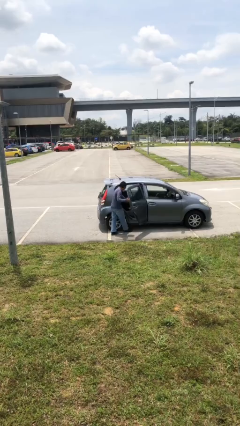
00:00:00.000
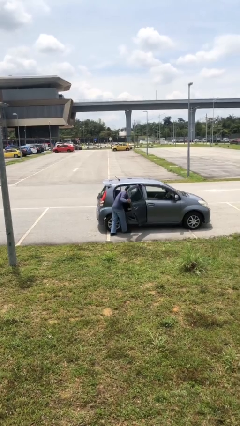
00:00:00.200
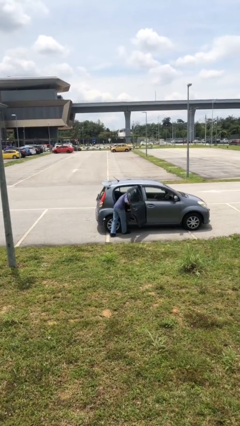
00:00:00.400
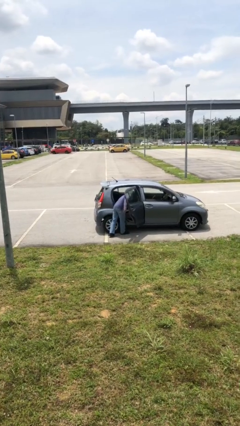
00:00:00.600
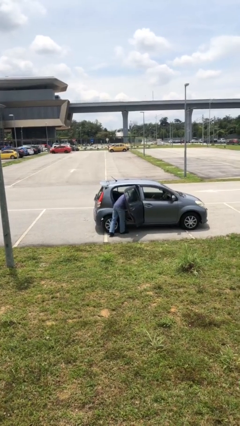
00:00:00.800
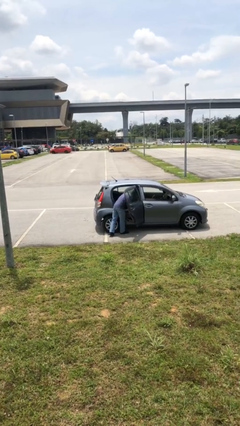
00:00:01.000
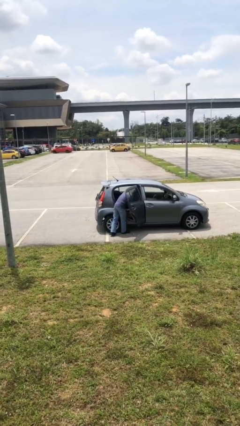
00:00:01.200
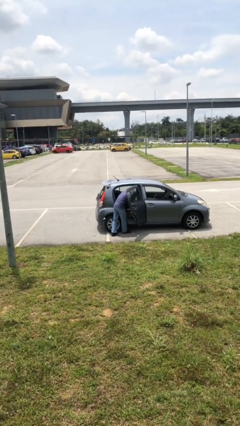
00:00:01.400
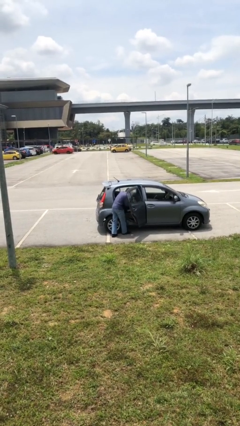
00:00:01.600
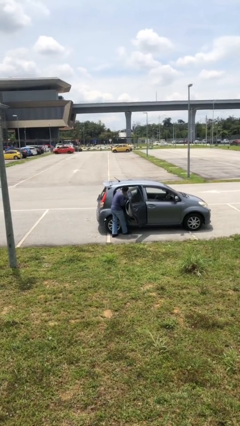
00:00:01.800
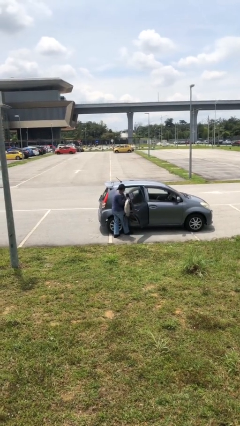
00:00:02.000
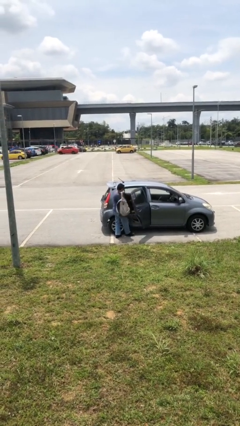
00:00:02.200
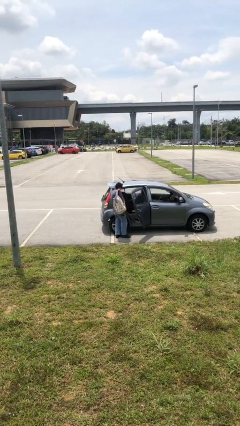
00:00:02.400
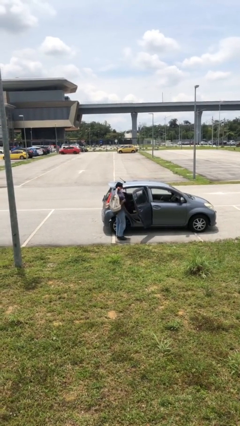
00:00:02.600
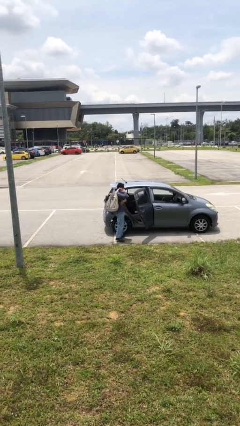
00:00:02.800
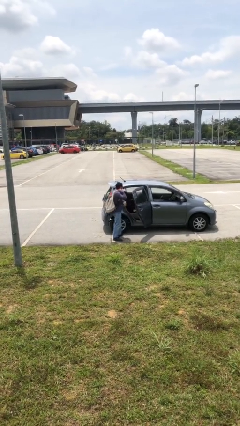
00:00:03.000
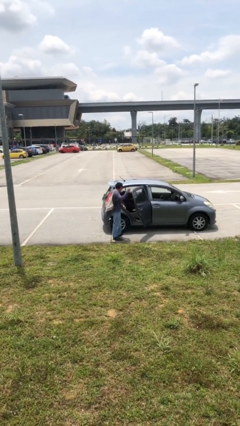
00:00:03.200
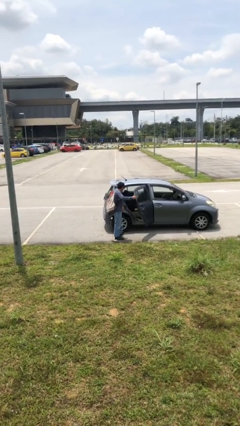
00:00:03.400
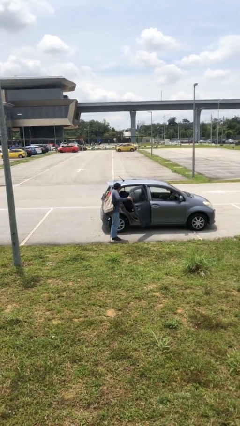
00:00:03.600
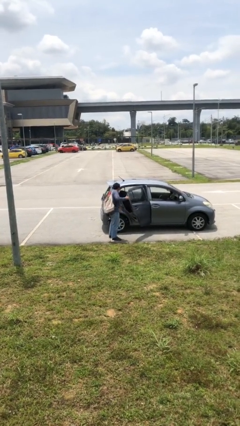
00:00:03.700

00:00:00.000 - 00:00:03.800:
person unloads car

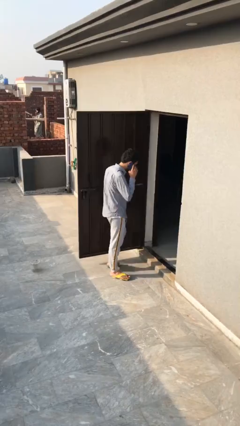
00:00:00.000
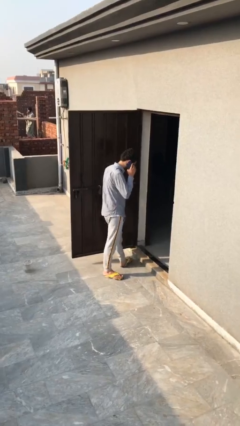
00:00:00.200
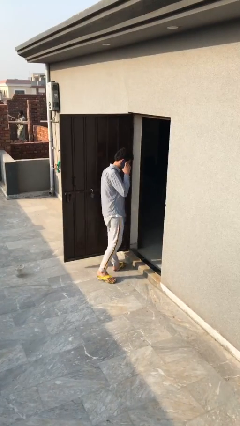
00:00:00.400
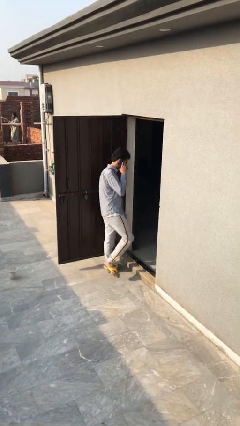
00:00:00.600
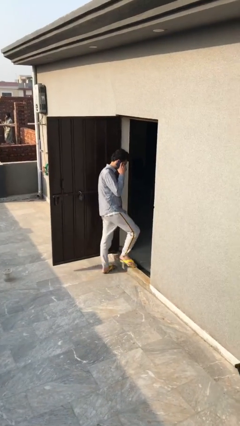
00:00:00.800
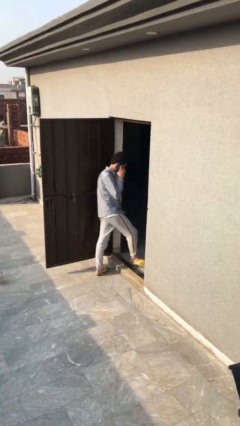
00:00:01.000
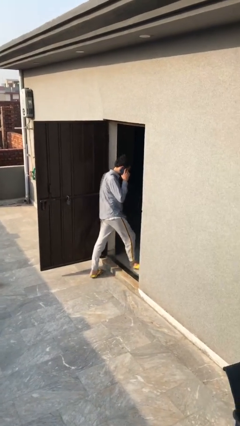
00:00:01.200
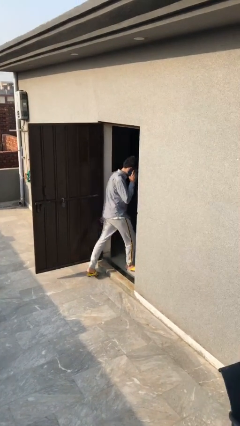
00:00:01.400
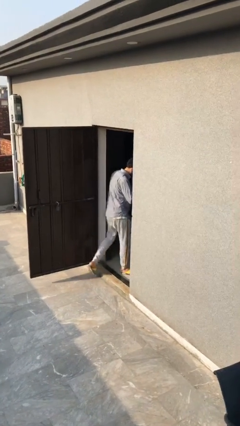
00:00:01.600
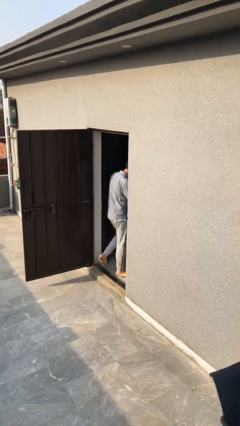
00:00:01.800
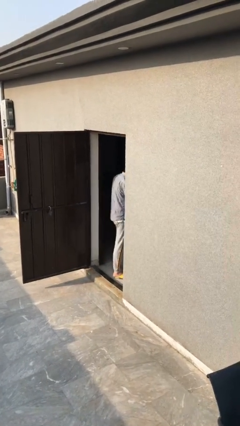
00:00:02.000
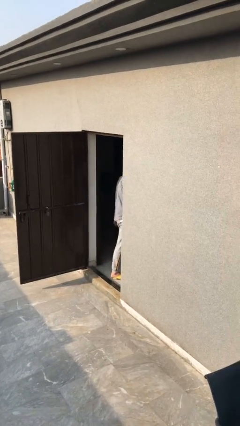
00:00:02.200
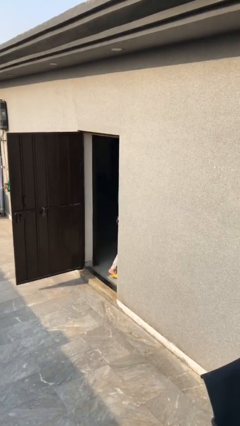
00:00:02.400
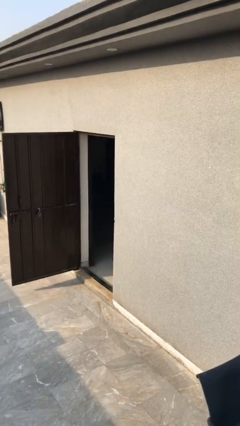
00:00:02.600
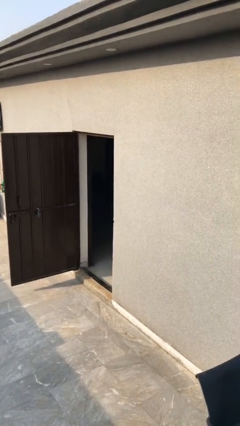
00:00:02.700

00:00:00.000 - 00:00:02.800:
person exits scene through structure

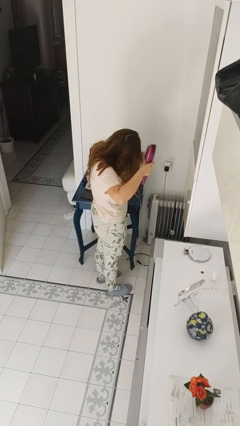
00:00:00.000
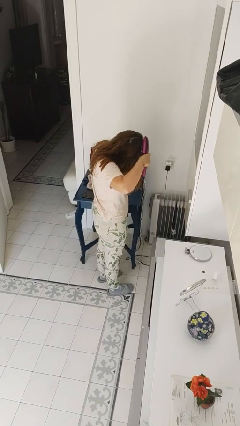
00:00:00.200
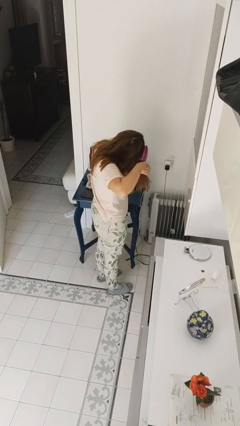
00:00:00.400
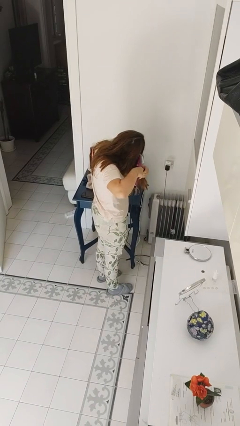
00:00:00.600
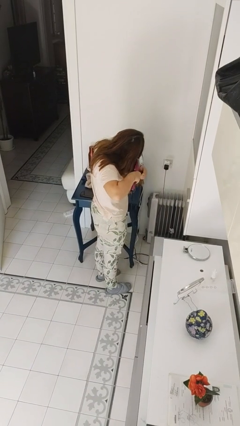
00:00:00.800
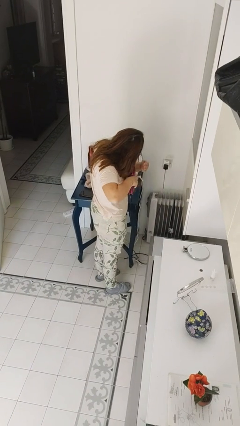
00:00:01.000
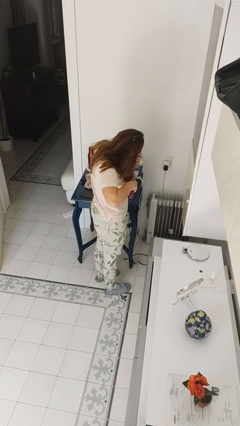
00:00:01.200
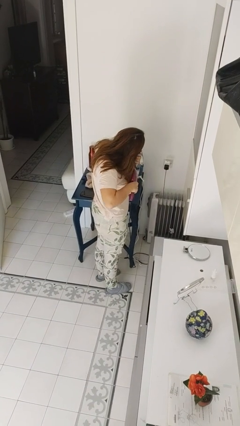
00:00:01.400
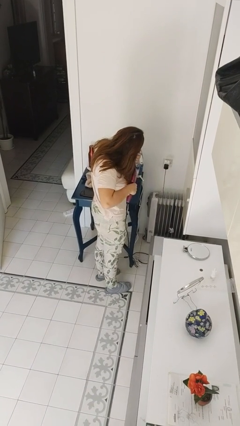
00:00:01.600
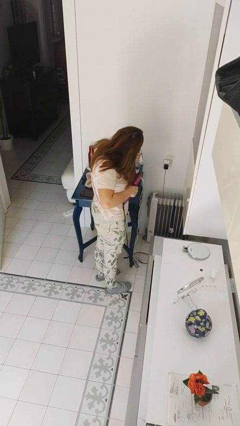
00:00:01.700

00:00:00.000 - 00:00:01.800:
person dries hair with hairdryer

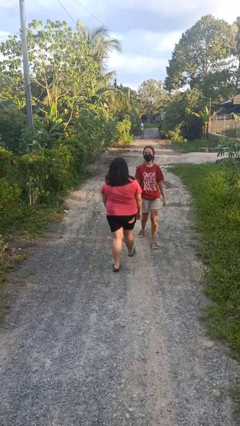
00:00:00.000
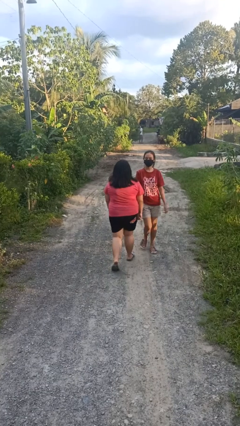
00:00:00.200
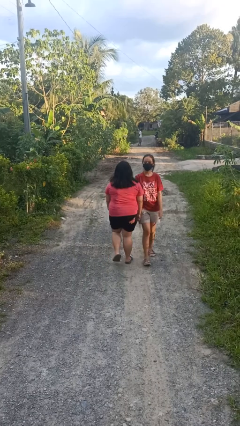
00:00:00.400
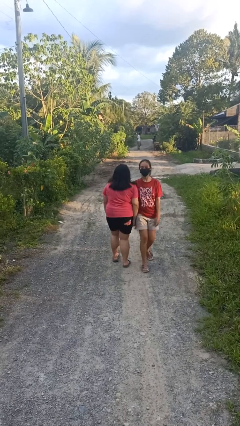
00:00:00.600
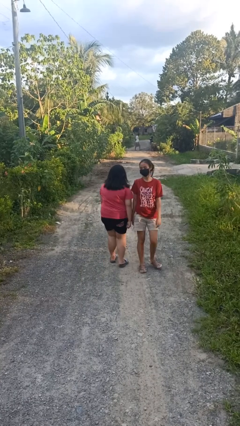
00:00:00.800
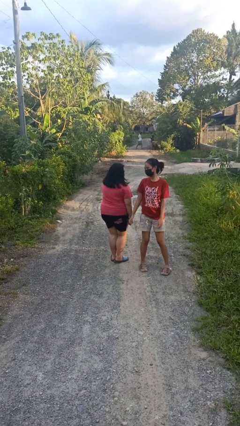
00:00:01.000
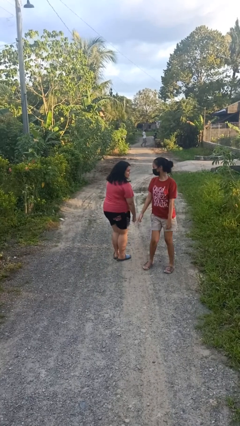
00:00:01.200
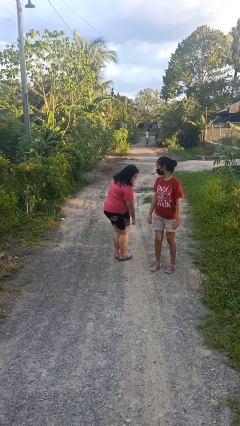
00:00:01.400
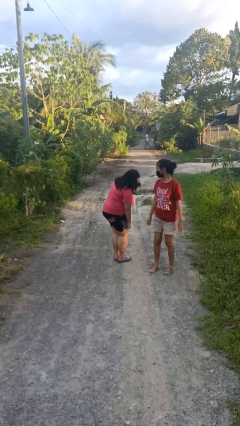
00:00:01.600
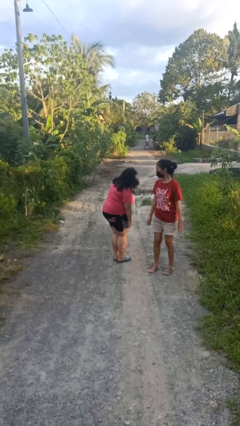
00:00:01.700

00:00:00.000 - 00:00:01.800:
person bumps into person

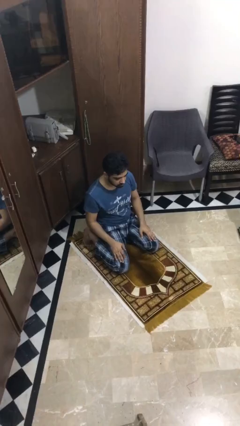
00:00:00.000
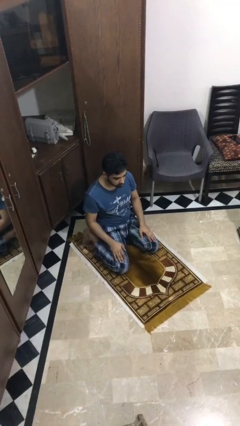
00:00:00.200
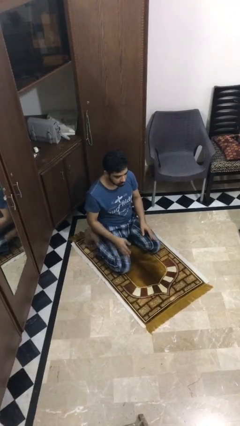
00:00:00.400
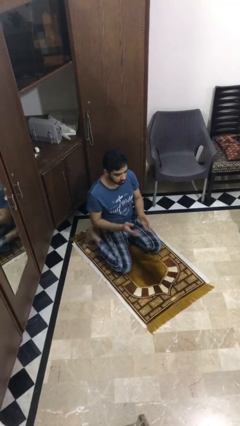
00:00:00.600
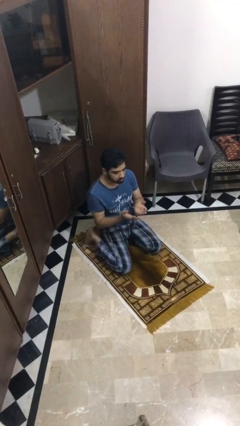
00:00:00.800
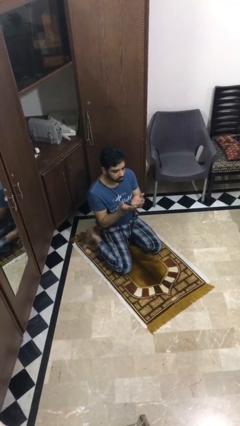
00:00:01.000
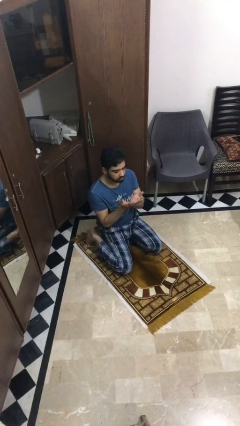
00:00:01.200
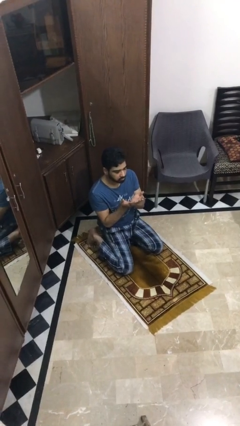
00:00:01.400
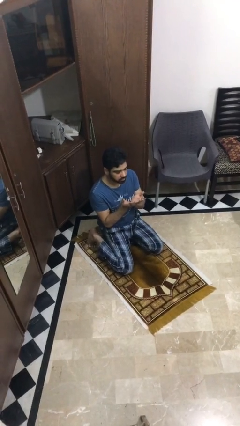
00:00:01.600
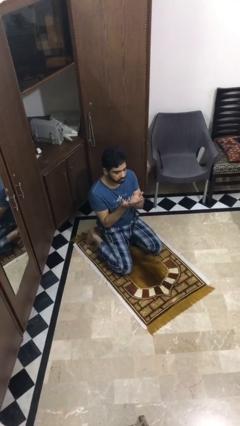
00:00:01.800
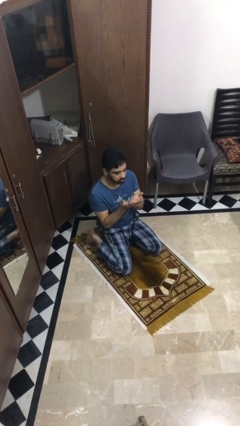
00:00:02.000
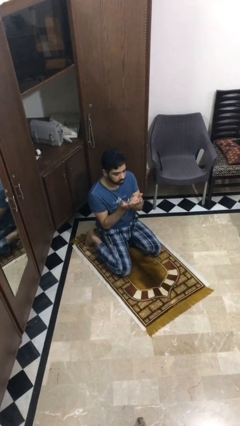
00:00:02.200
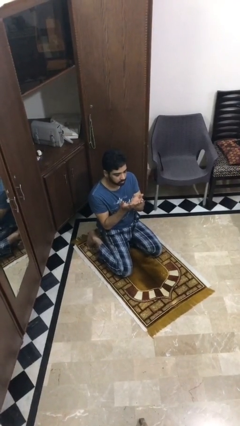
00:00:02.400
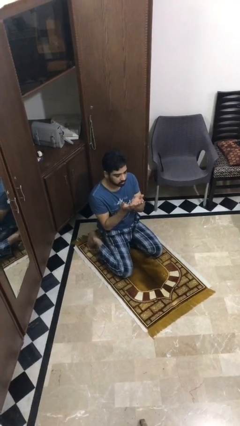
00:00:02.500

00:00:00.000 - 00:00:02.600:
person prays

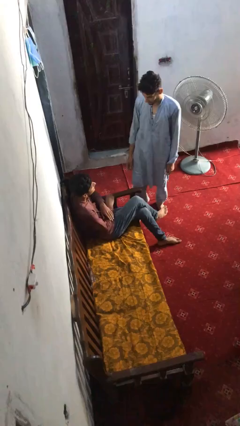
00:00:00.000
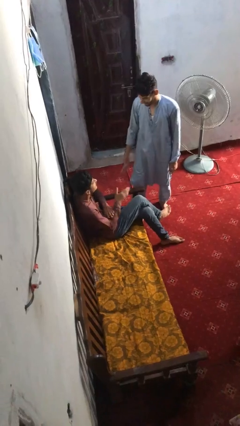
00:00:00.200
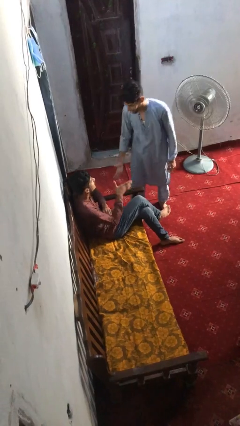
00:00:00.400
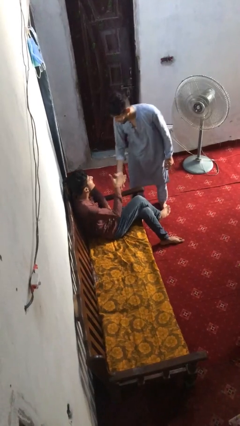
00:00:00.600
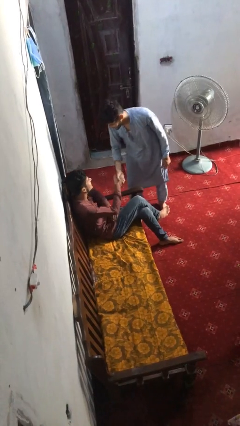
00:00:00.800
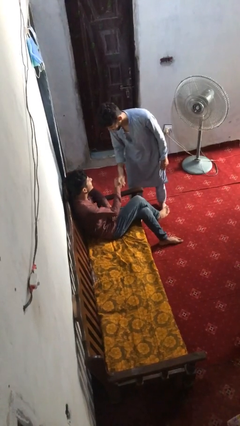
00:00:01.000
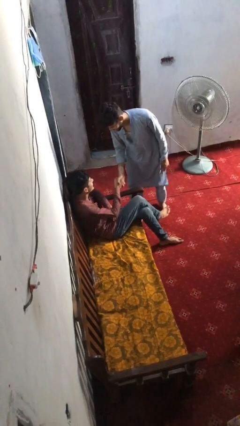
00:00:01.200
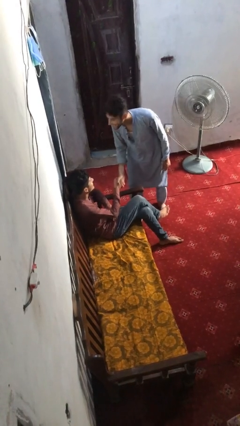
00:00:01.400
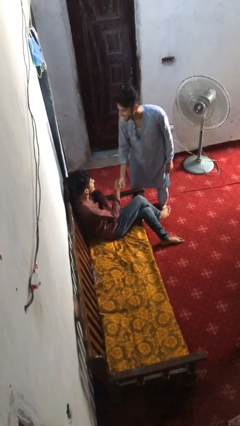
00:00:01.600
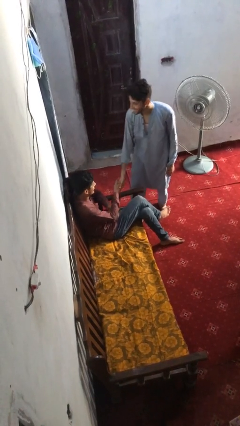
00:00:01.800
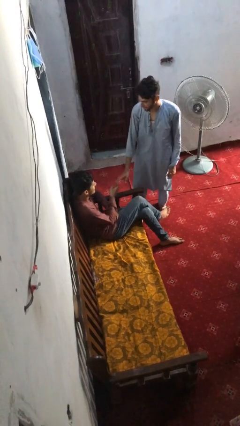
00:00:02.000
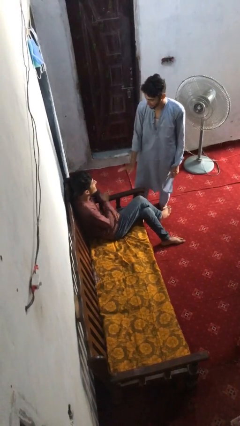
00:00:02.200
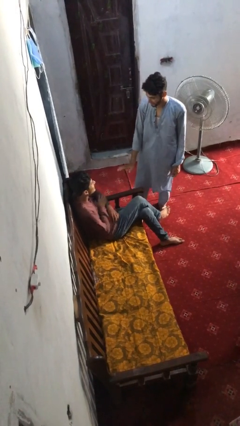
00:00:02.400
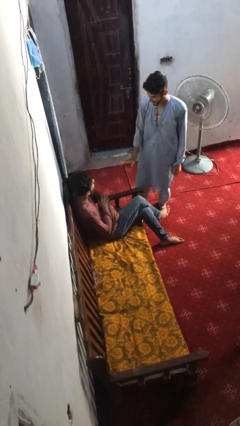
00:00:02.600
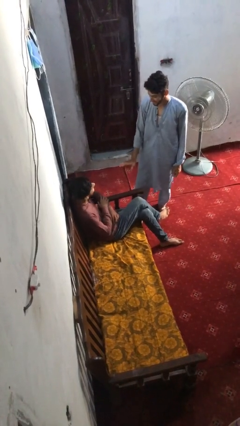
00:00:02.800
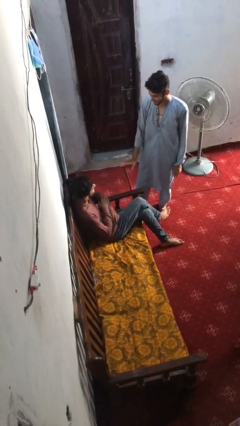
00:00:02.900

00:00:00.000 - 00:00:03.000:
person shakes hand

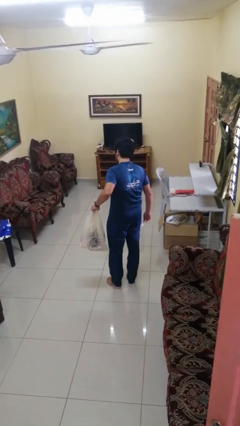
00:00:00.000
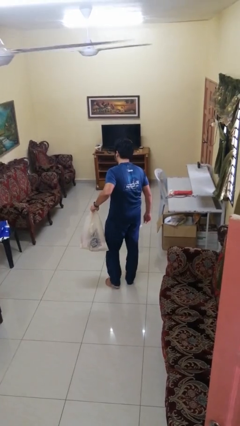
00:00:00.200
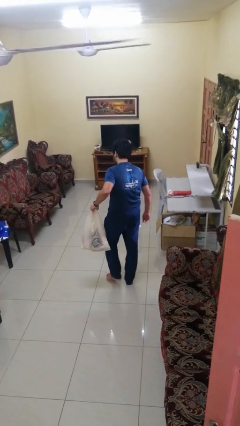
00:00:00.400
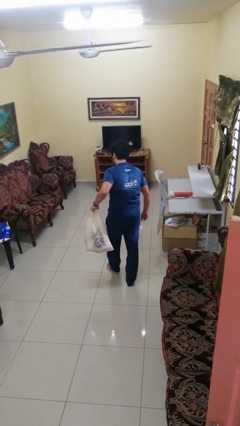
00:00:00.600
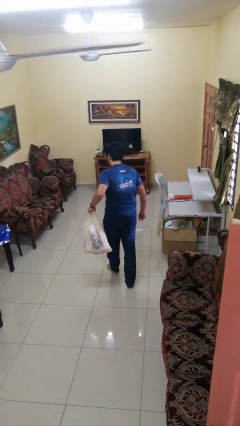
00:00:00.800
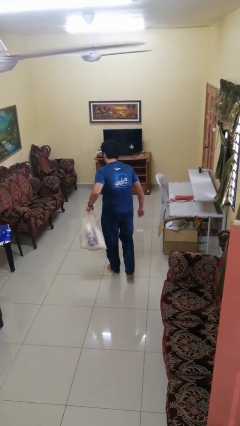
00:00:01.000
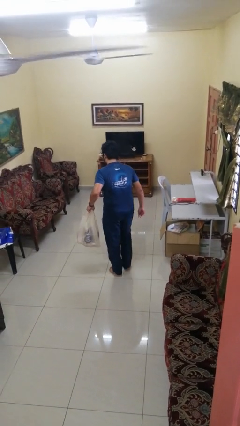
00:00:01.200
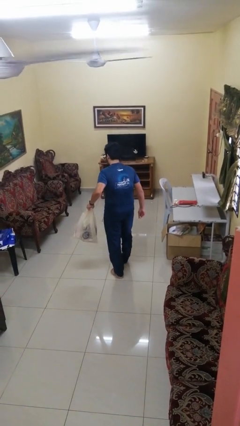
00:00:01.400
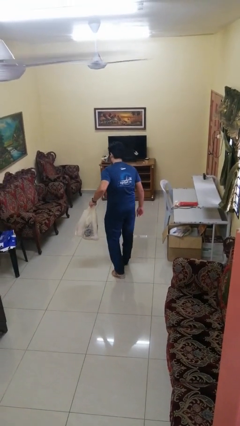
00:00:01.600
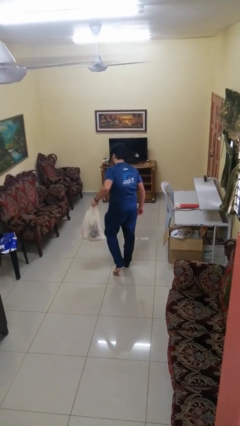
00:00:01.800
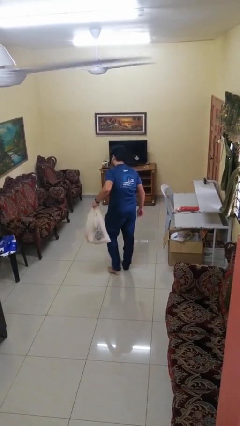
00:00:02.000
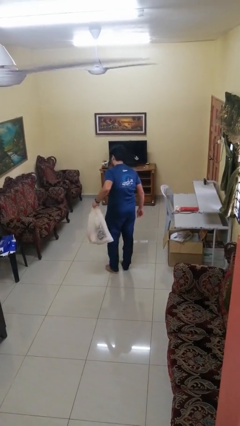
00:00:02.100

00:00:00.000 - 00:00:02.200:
person carries groceries
